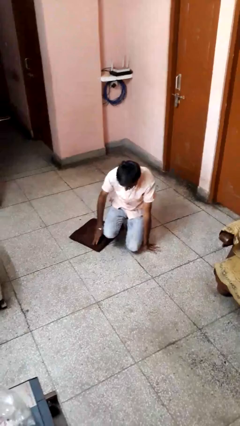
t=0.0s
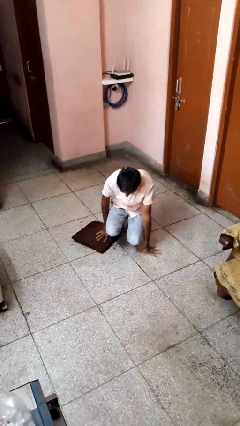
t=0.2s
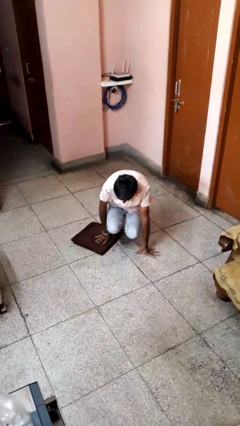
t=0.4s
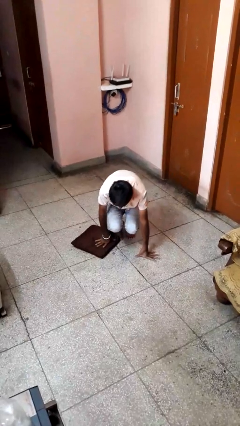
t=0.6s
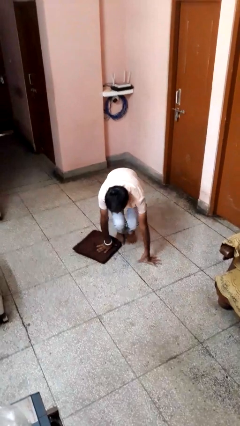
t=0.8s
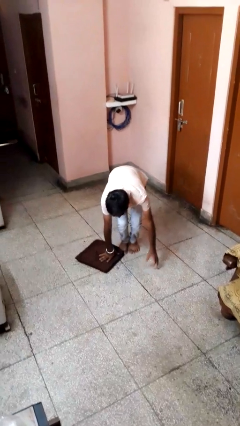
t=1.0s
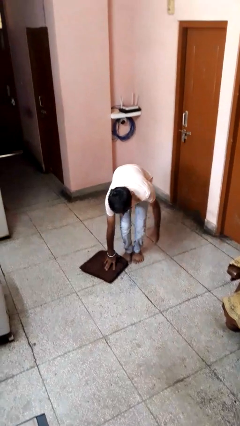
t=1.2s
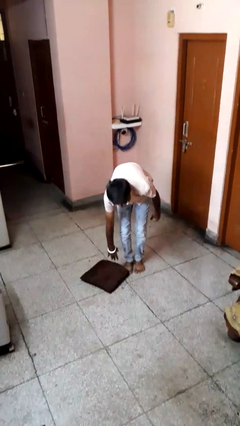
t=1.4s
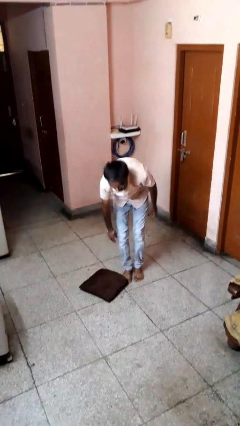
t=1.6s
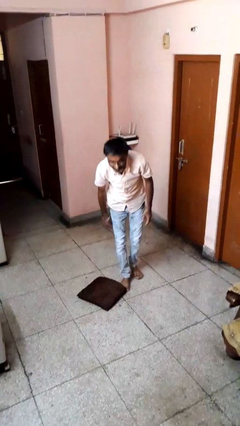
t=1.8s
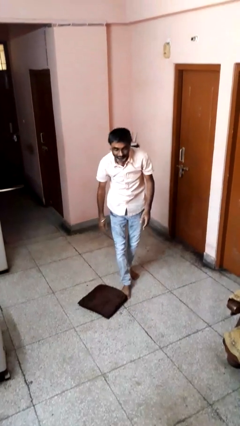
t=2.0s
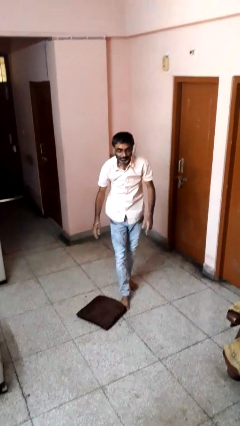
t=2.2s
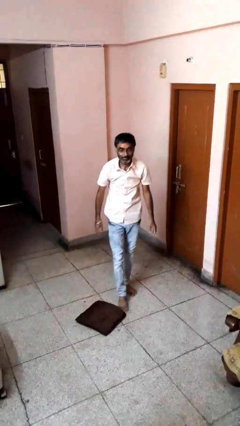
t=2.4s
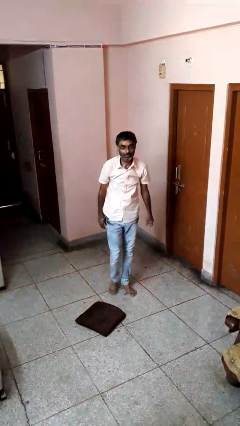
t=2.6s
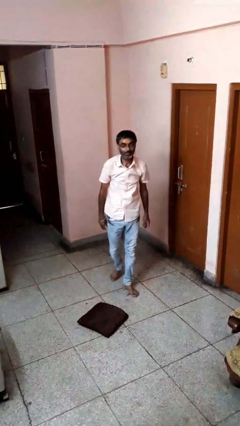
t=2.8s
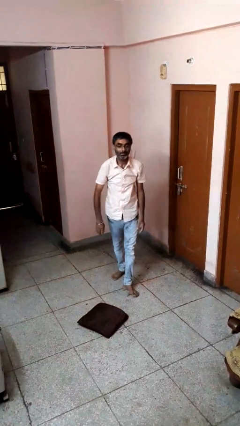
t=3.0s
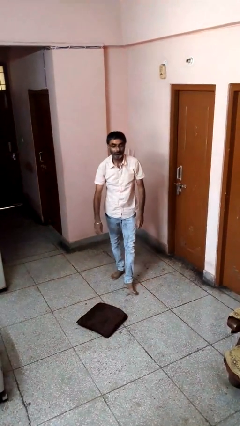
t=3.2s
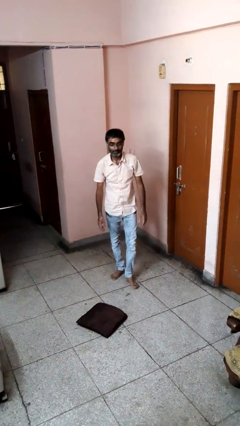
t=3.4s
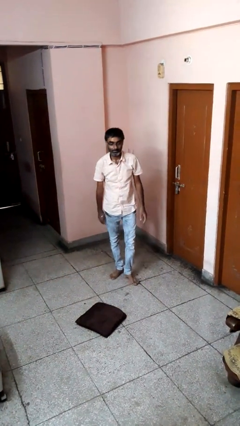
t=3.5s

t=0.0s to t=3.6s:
person stands up from floor

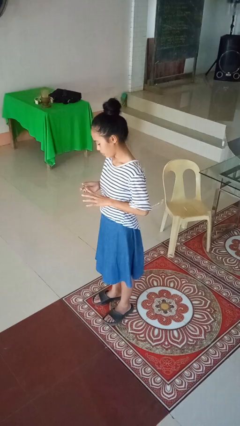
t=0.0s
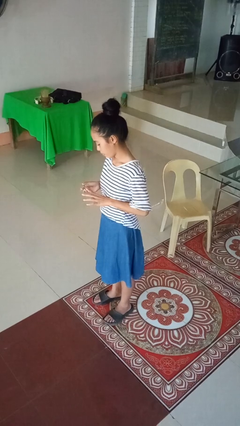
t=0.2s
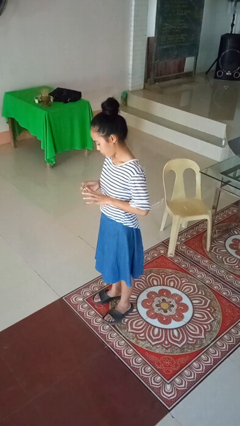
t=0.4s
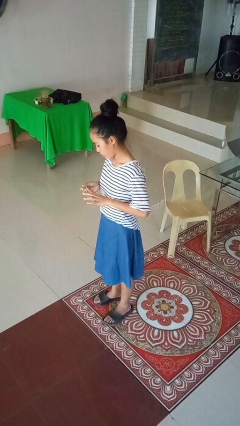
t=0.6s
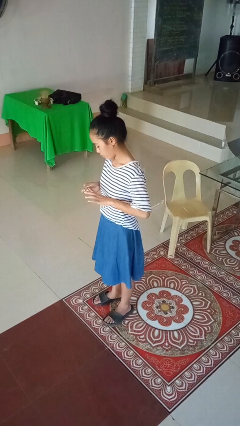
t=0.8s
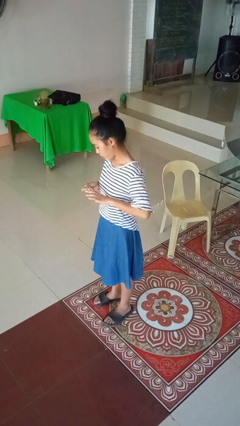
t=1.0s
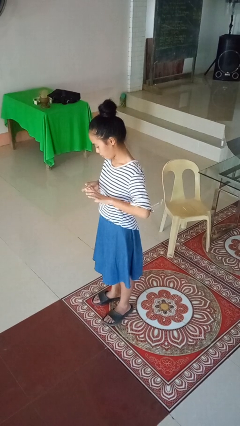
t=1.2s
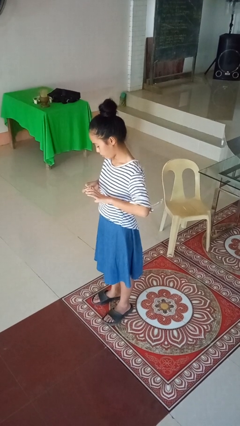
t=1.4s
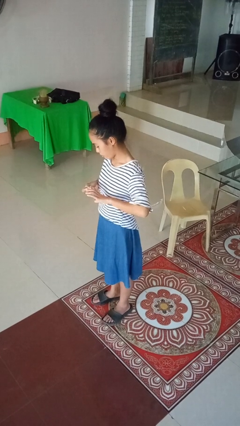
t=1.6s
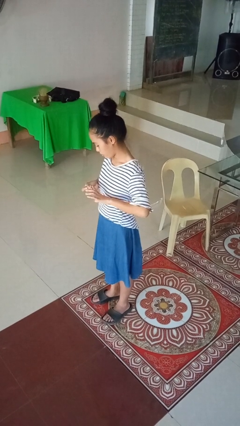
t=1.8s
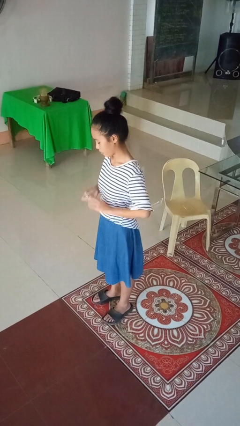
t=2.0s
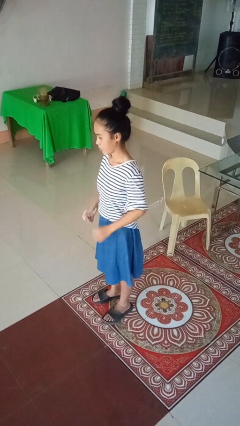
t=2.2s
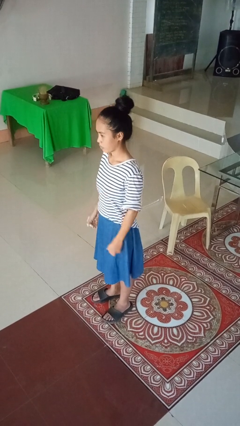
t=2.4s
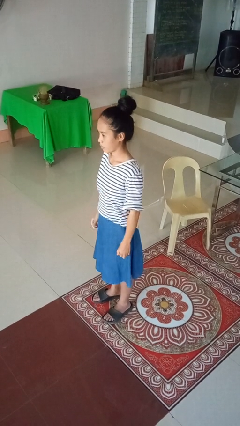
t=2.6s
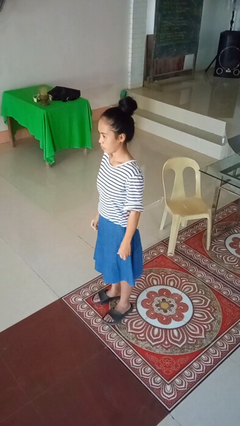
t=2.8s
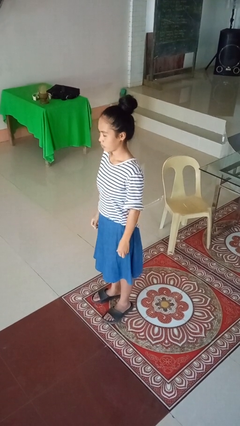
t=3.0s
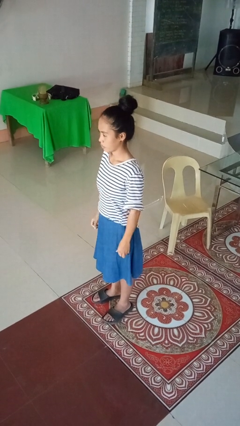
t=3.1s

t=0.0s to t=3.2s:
person clips fingernails

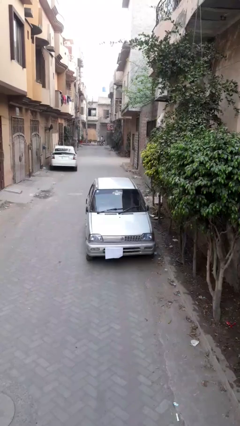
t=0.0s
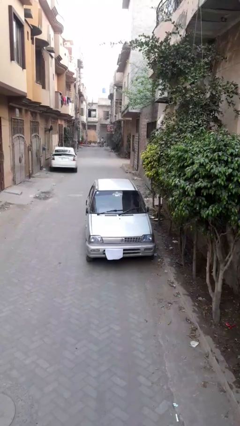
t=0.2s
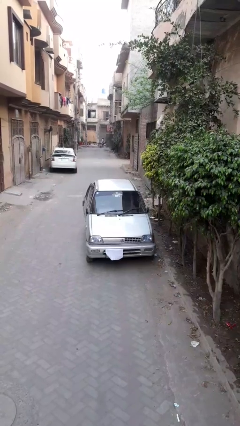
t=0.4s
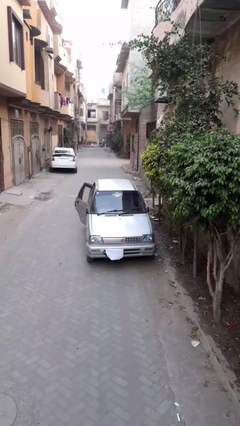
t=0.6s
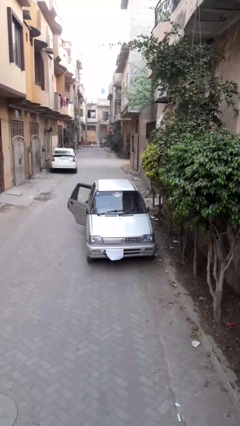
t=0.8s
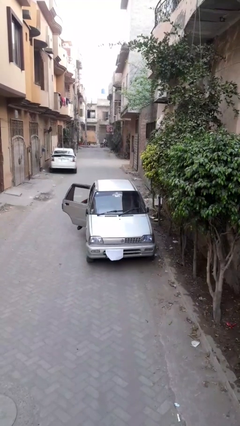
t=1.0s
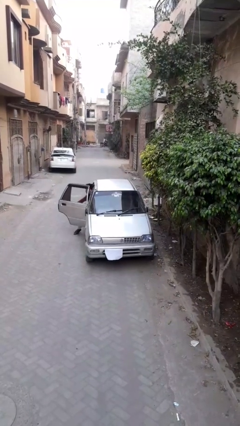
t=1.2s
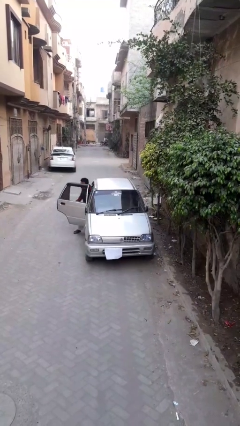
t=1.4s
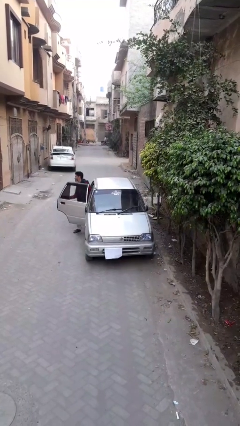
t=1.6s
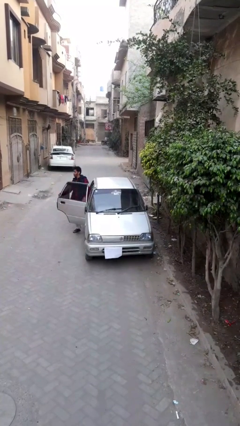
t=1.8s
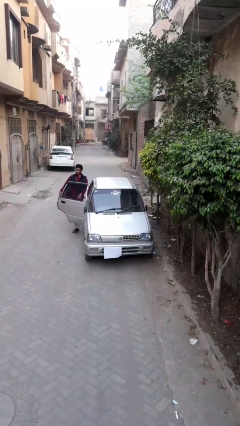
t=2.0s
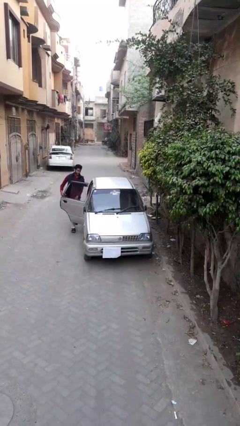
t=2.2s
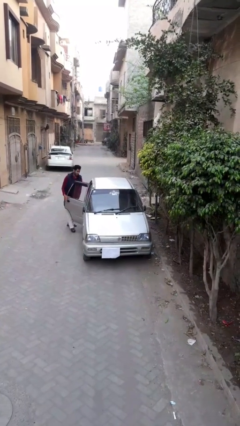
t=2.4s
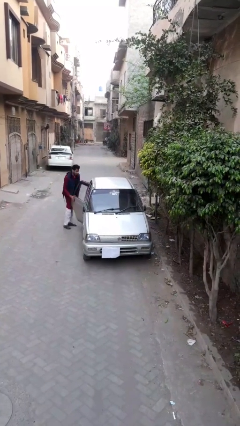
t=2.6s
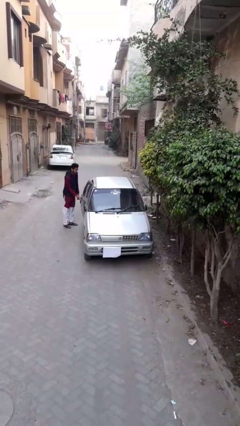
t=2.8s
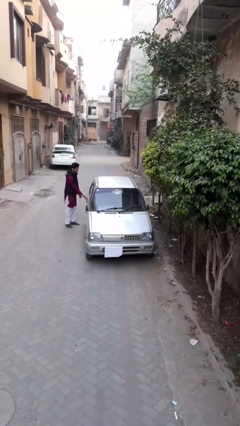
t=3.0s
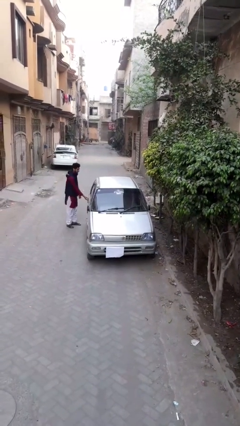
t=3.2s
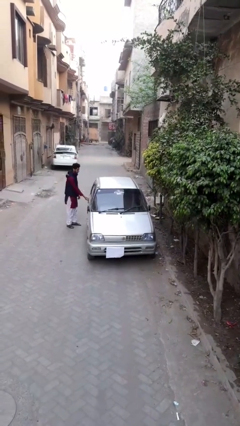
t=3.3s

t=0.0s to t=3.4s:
car drops off person

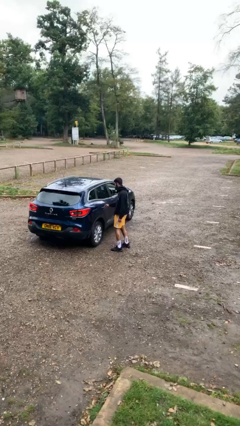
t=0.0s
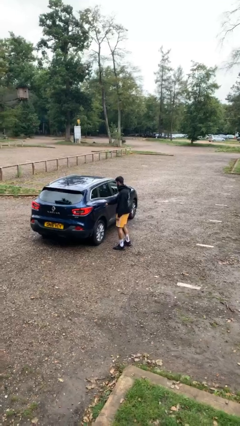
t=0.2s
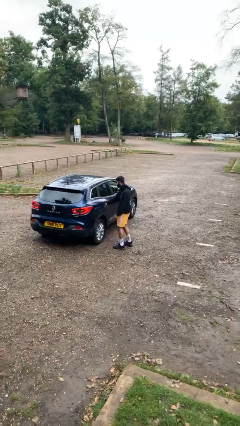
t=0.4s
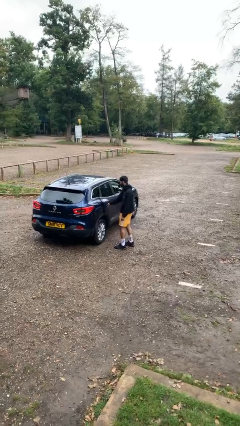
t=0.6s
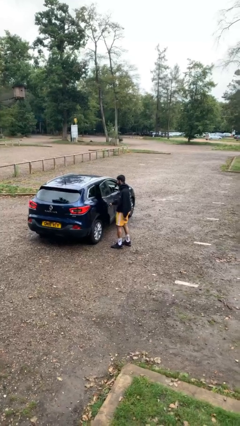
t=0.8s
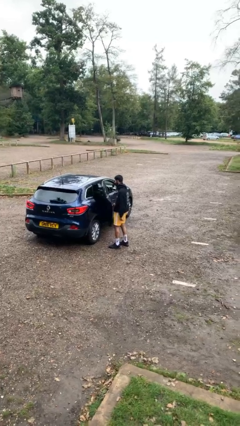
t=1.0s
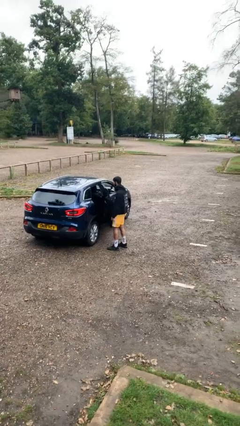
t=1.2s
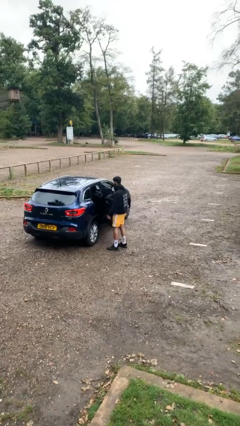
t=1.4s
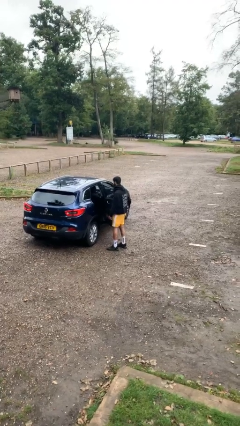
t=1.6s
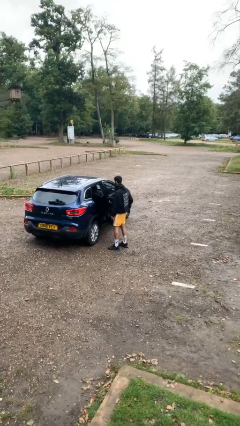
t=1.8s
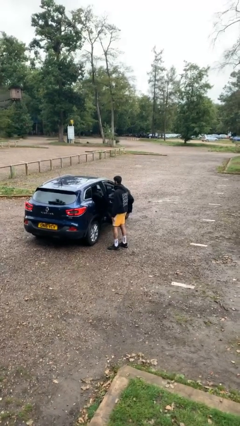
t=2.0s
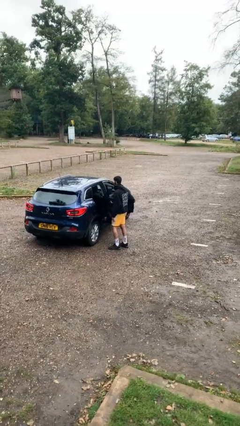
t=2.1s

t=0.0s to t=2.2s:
person opens car door

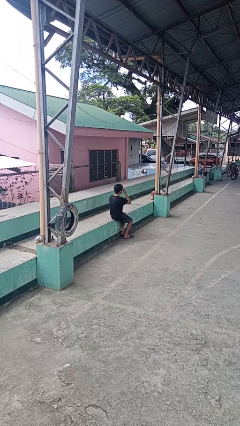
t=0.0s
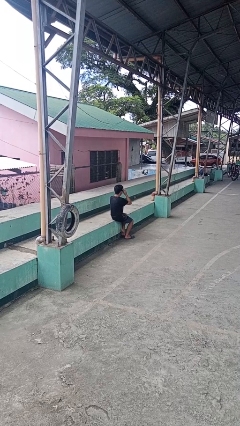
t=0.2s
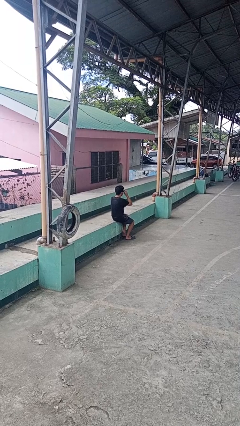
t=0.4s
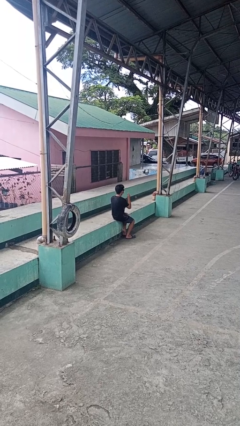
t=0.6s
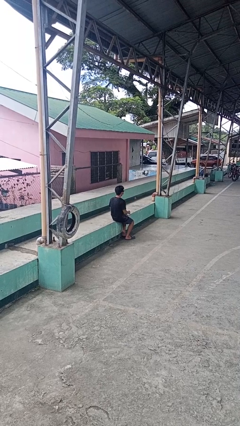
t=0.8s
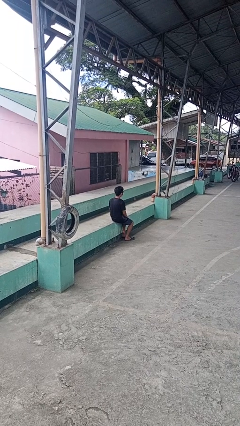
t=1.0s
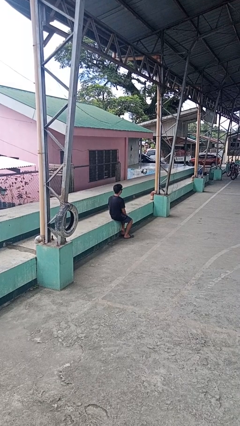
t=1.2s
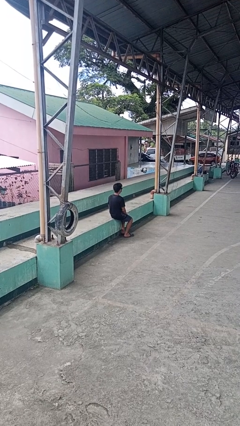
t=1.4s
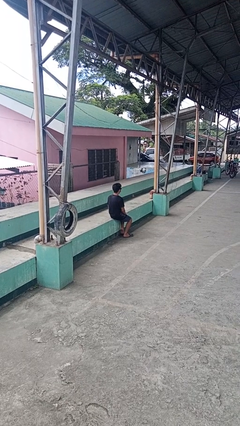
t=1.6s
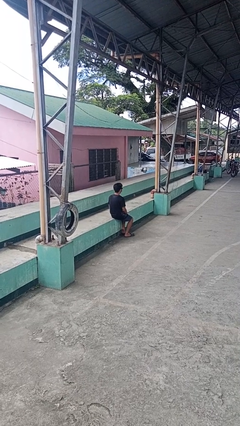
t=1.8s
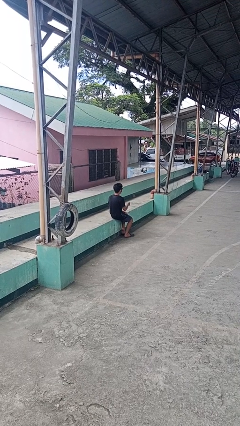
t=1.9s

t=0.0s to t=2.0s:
person puts on sunglasses

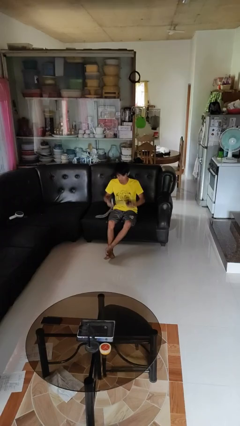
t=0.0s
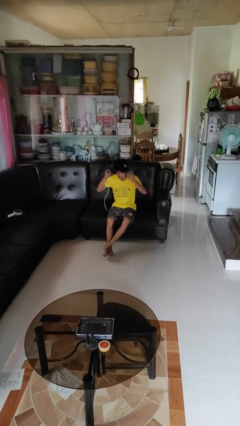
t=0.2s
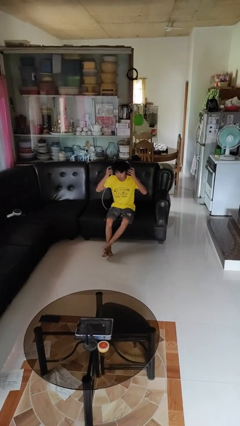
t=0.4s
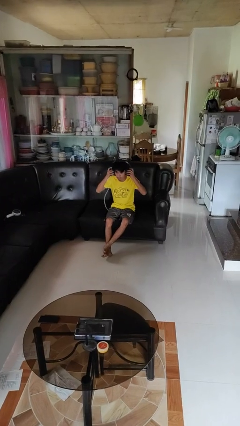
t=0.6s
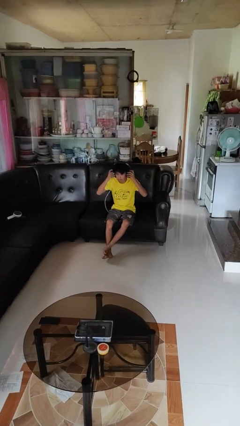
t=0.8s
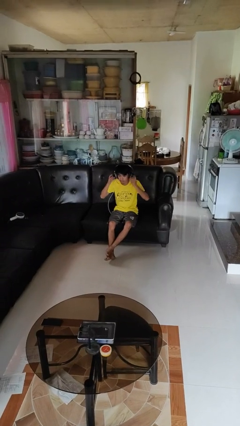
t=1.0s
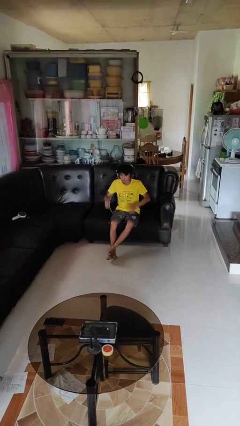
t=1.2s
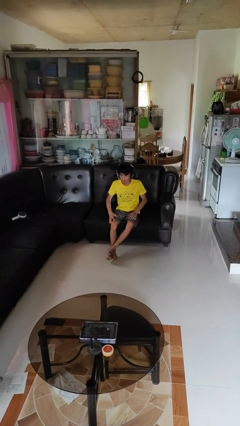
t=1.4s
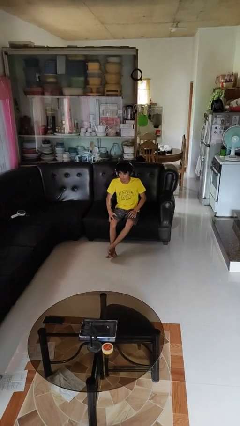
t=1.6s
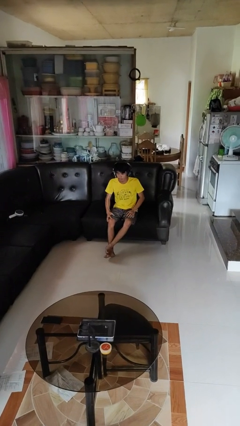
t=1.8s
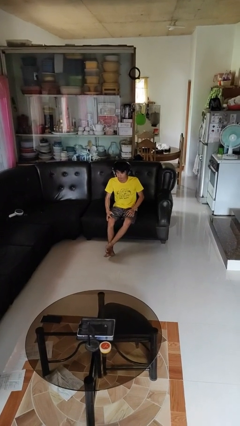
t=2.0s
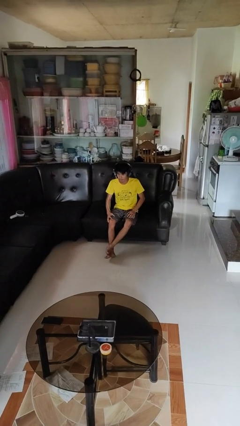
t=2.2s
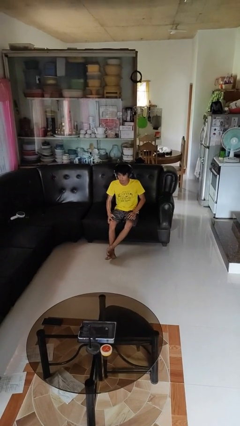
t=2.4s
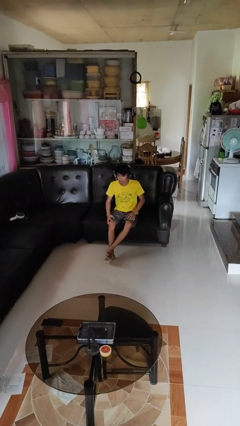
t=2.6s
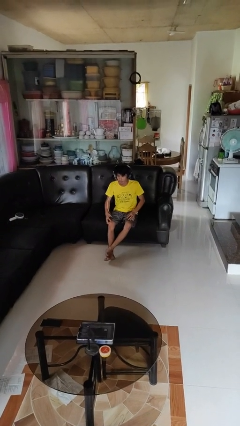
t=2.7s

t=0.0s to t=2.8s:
person puts on headphones

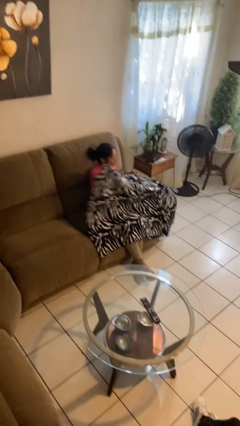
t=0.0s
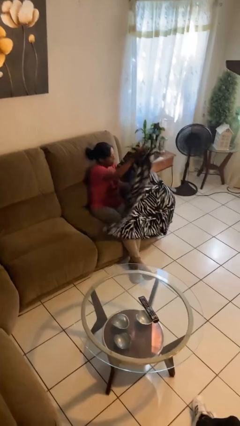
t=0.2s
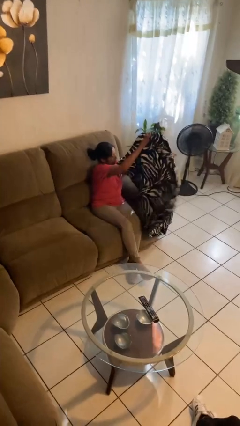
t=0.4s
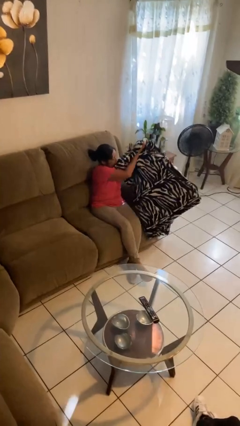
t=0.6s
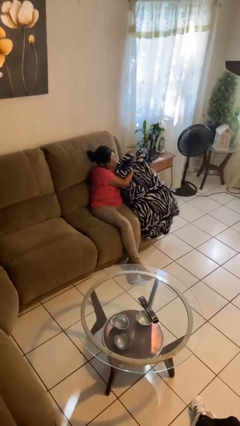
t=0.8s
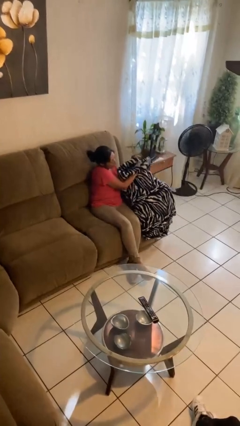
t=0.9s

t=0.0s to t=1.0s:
person uncovers with blanket
